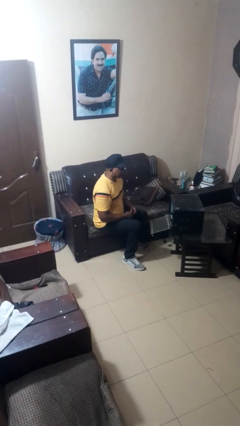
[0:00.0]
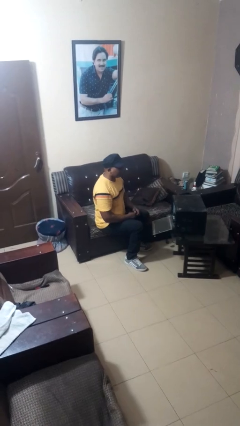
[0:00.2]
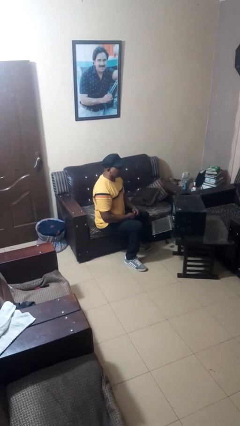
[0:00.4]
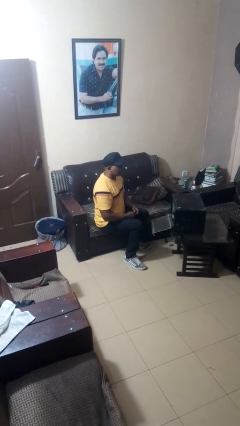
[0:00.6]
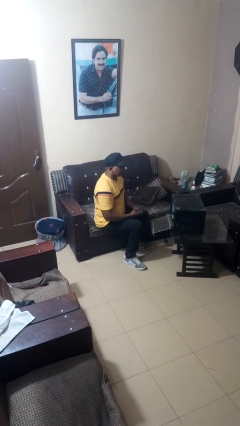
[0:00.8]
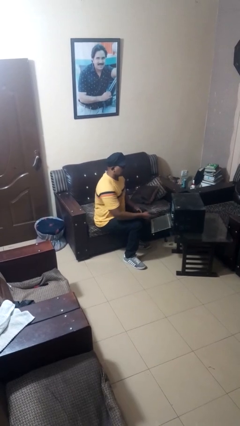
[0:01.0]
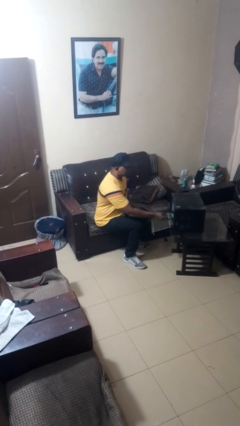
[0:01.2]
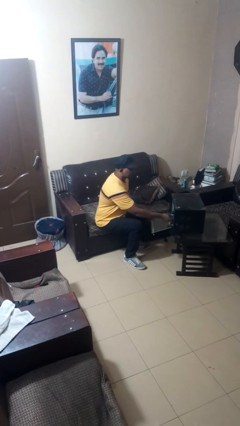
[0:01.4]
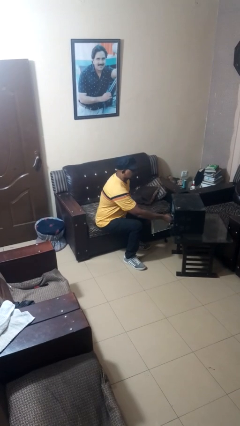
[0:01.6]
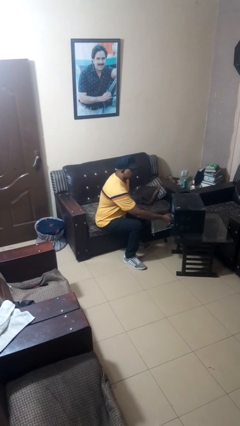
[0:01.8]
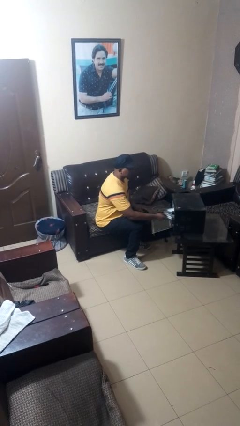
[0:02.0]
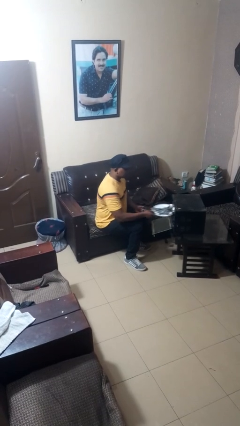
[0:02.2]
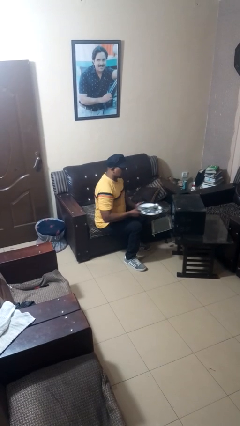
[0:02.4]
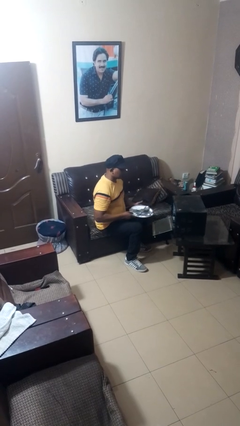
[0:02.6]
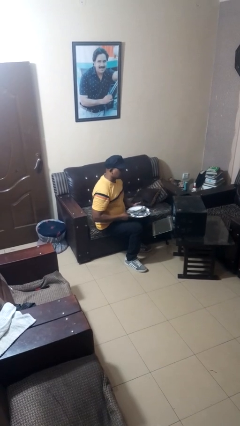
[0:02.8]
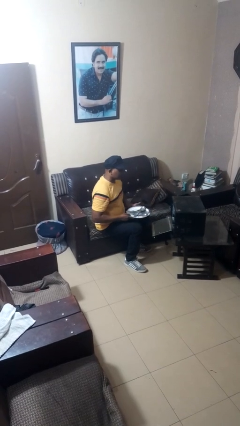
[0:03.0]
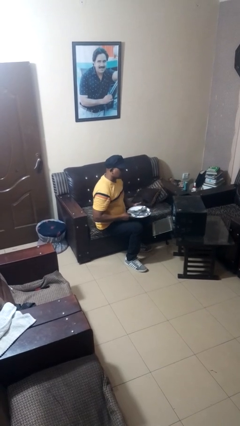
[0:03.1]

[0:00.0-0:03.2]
person unloads dishwasher

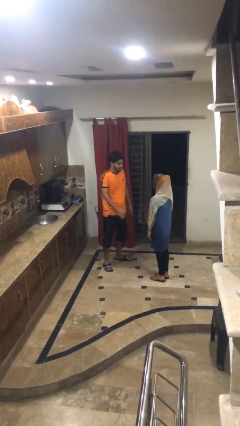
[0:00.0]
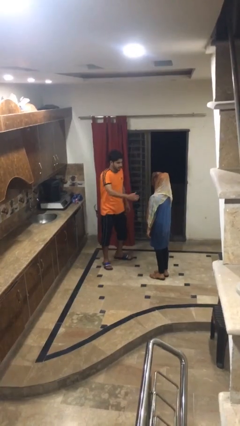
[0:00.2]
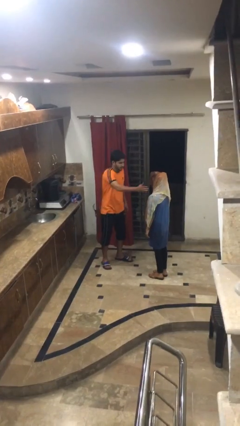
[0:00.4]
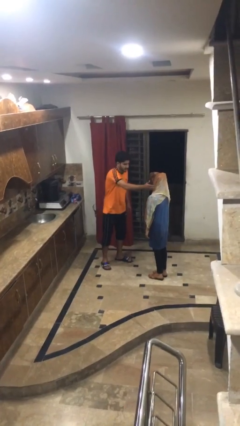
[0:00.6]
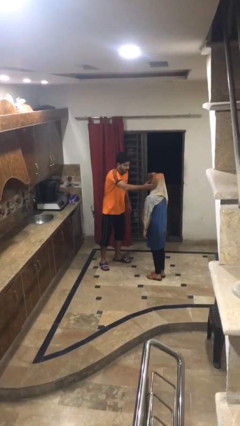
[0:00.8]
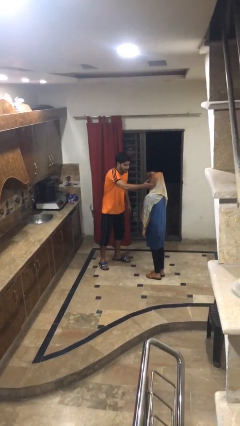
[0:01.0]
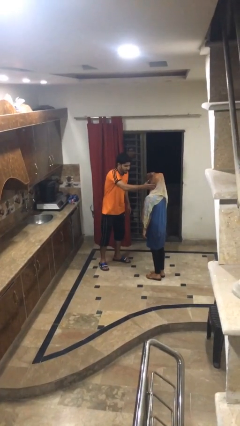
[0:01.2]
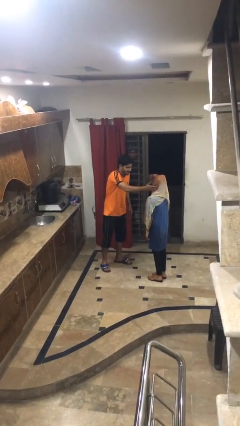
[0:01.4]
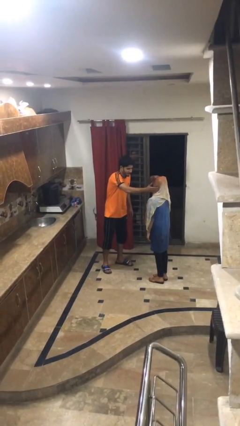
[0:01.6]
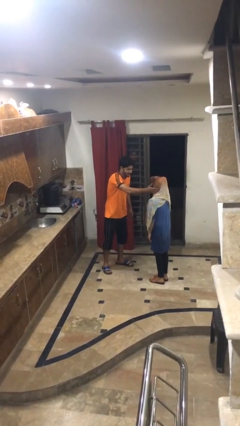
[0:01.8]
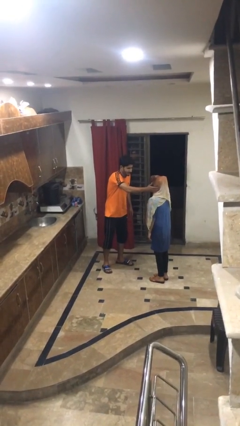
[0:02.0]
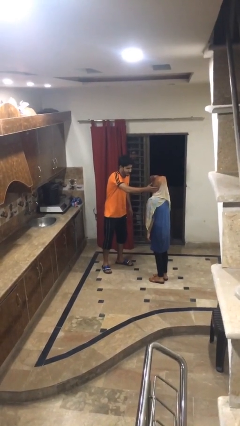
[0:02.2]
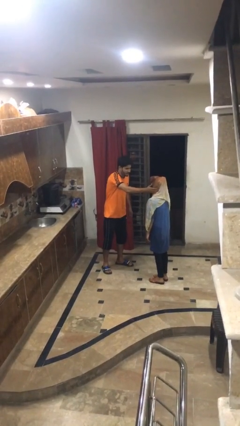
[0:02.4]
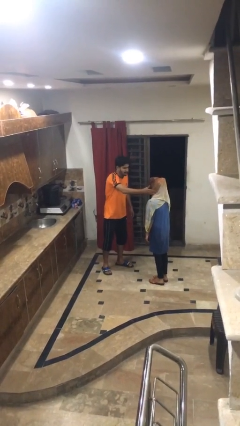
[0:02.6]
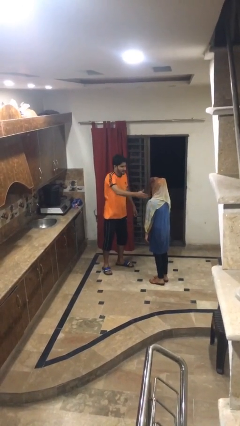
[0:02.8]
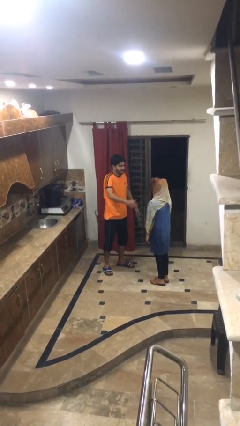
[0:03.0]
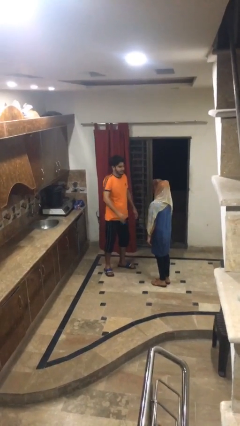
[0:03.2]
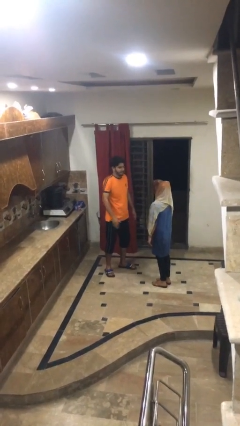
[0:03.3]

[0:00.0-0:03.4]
person touches face of person

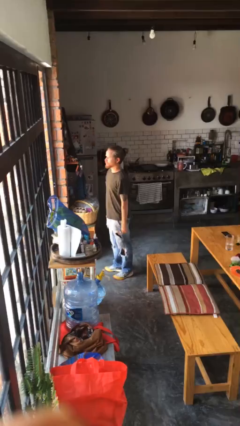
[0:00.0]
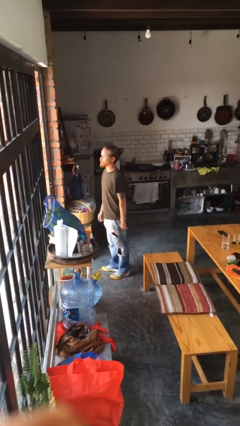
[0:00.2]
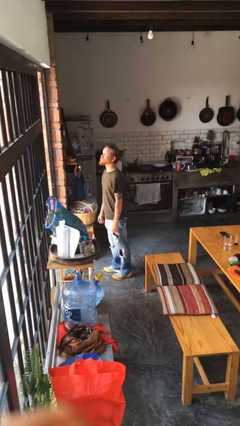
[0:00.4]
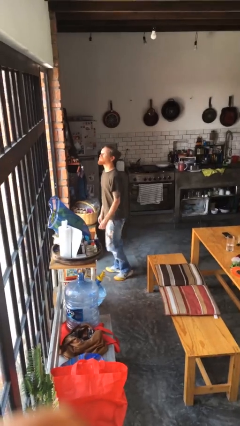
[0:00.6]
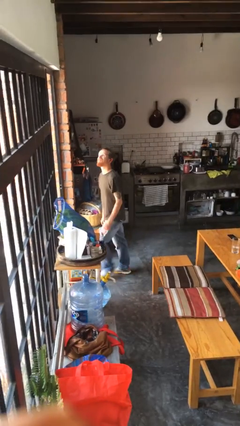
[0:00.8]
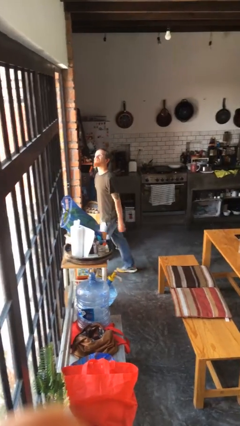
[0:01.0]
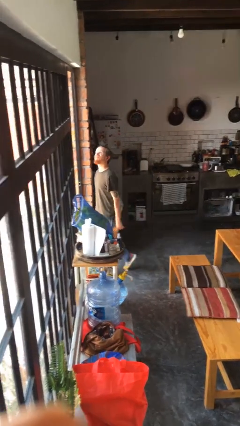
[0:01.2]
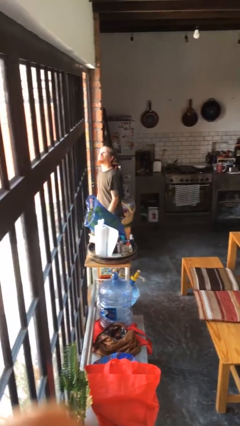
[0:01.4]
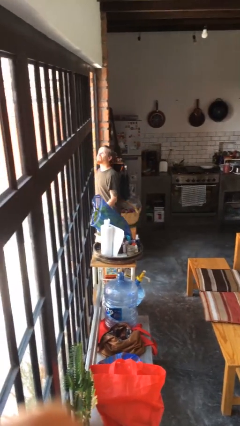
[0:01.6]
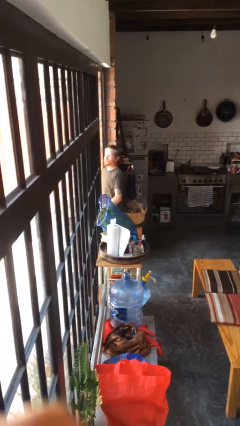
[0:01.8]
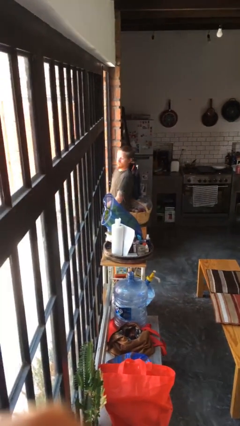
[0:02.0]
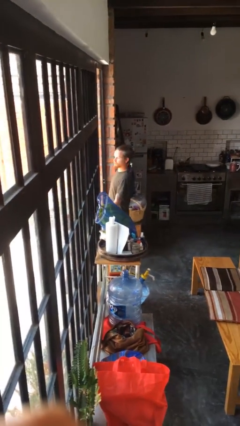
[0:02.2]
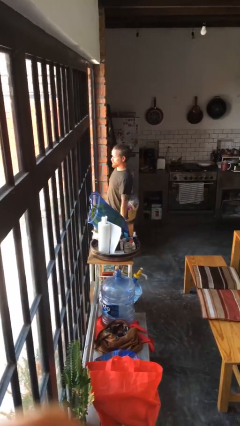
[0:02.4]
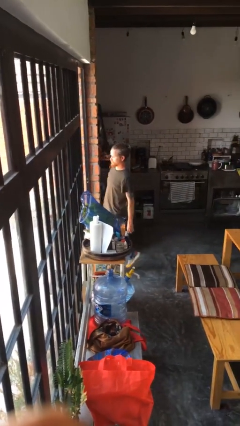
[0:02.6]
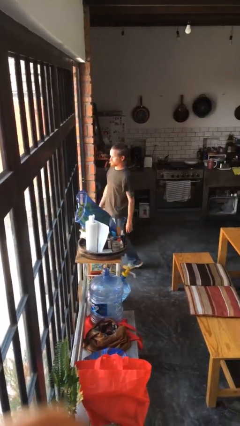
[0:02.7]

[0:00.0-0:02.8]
person bumps into wall

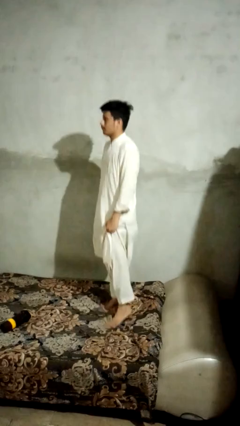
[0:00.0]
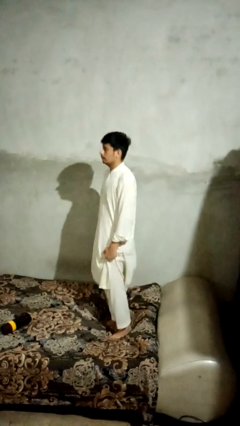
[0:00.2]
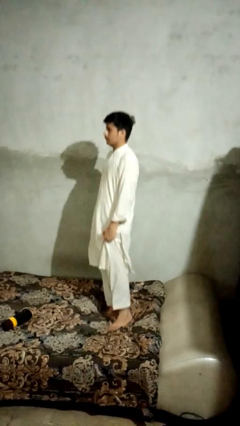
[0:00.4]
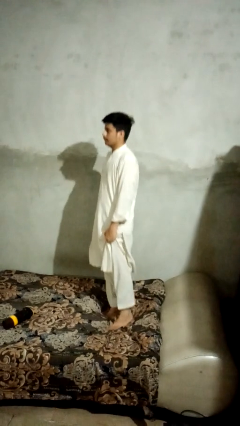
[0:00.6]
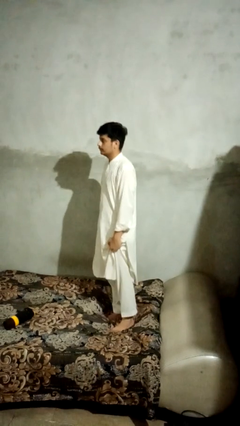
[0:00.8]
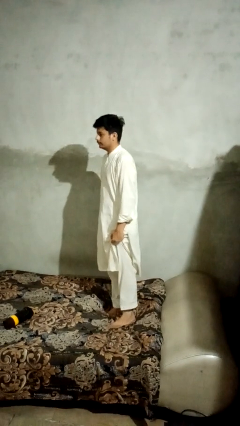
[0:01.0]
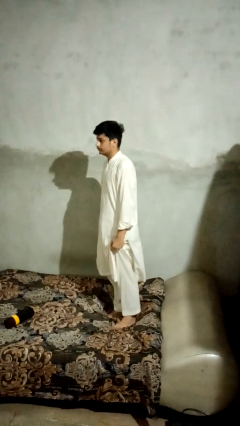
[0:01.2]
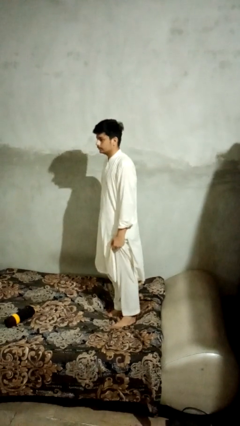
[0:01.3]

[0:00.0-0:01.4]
person jumps on bed

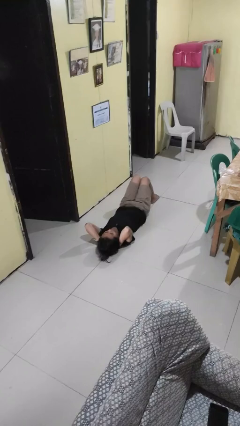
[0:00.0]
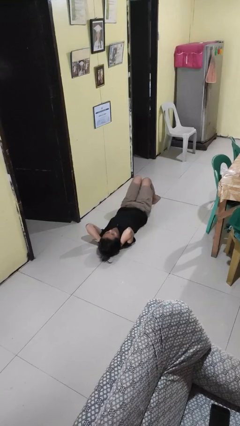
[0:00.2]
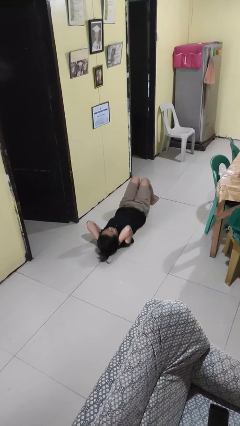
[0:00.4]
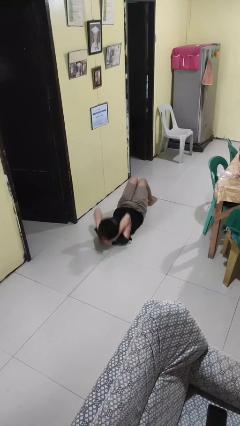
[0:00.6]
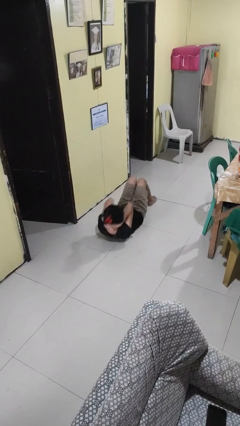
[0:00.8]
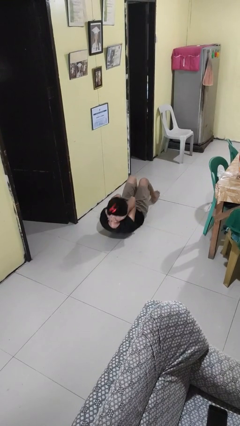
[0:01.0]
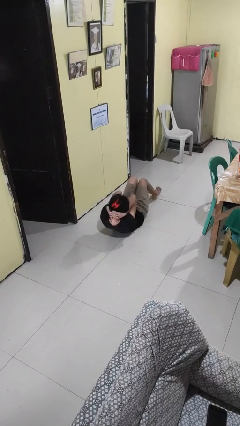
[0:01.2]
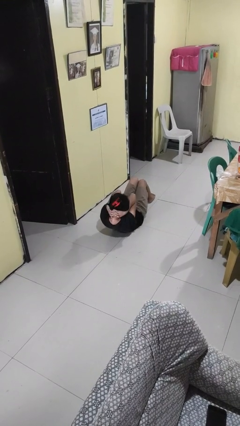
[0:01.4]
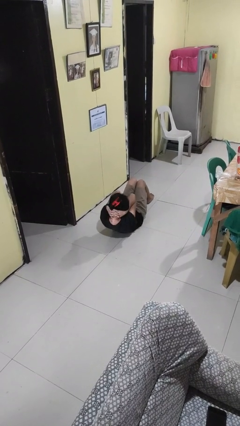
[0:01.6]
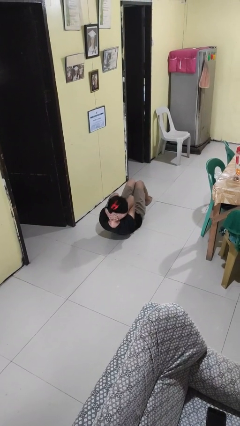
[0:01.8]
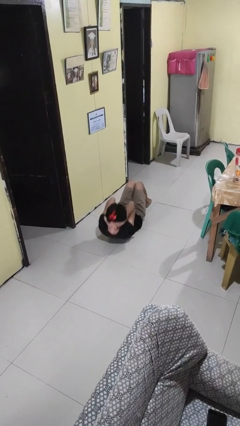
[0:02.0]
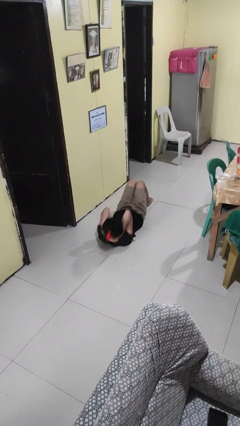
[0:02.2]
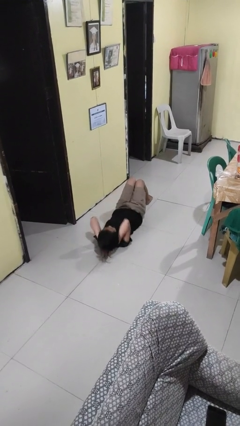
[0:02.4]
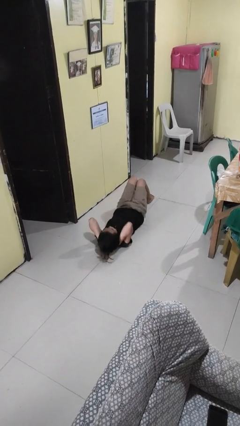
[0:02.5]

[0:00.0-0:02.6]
person exercises with situp

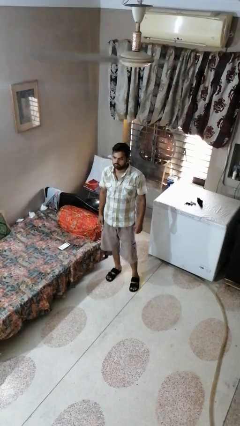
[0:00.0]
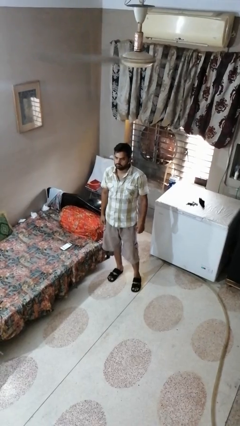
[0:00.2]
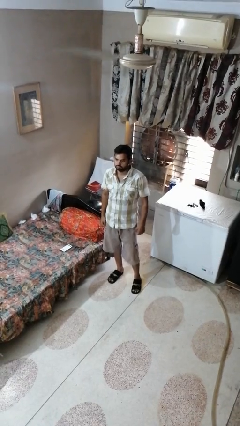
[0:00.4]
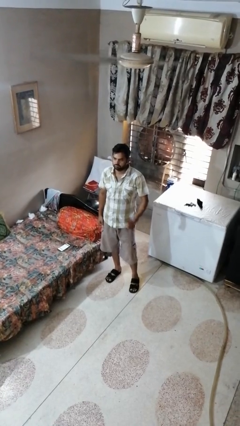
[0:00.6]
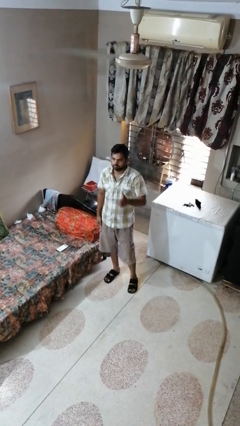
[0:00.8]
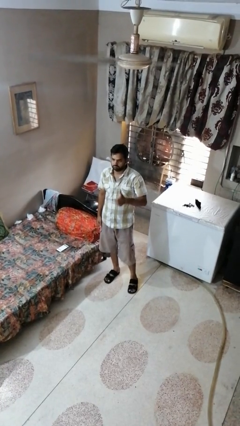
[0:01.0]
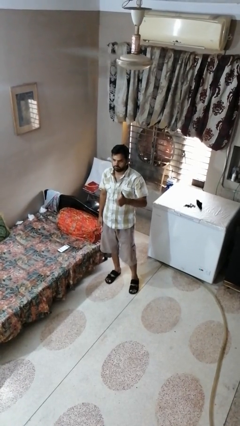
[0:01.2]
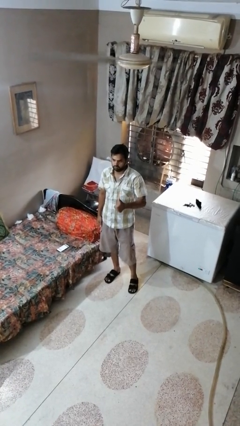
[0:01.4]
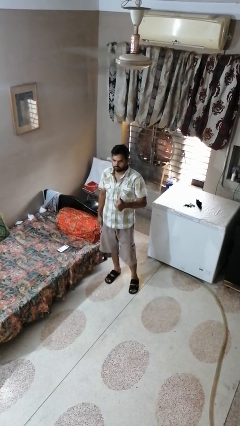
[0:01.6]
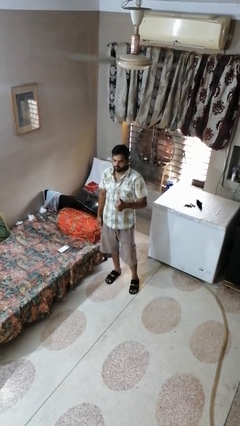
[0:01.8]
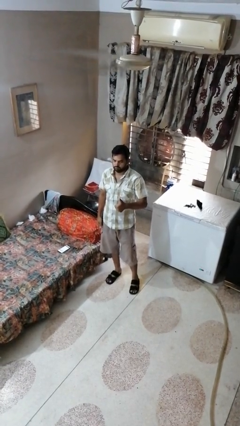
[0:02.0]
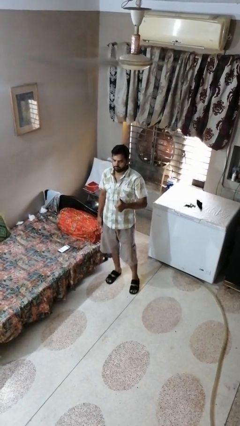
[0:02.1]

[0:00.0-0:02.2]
person gestures thumbs up

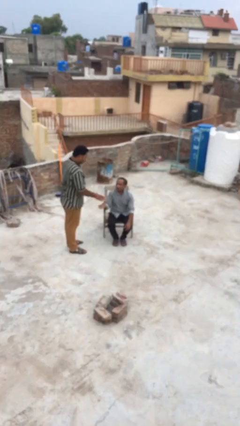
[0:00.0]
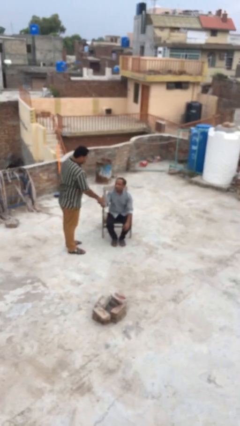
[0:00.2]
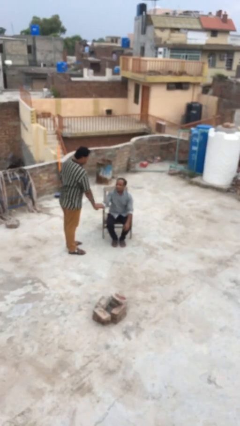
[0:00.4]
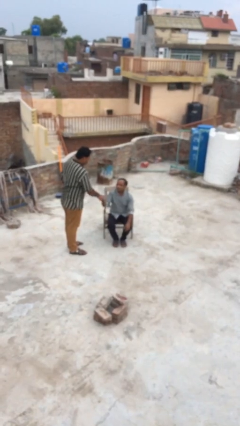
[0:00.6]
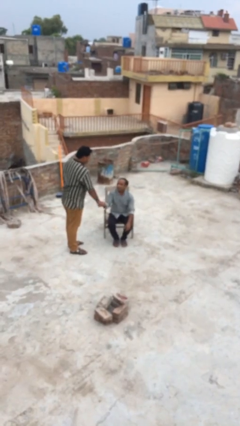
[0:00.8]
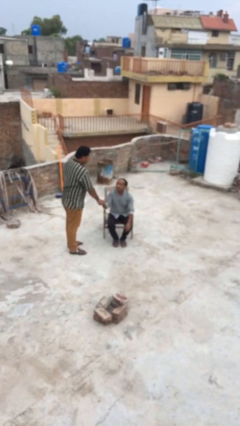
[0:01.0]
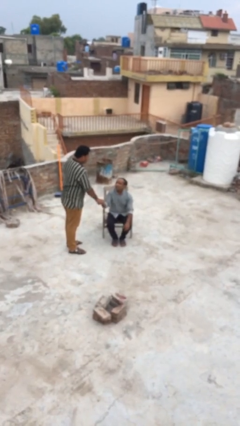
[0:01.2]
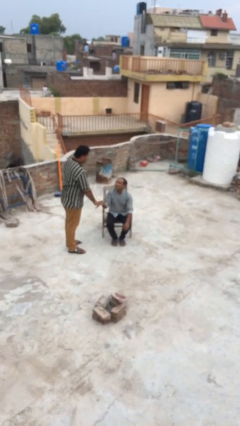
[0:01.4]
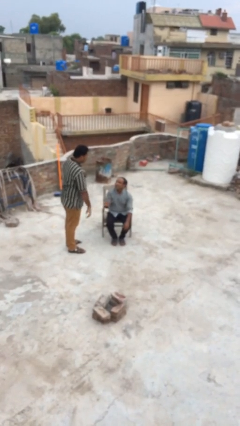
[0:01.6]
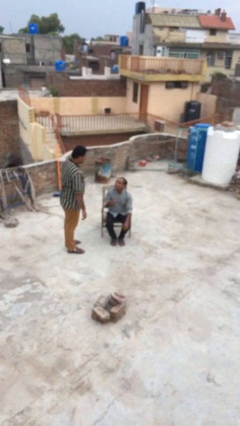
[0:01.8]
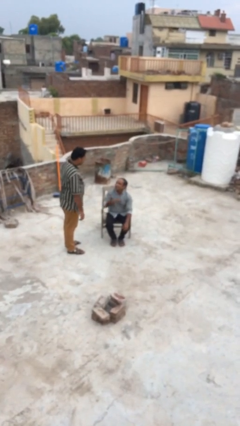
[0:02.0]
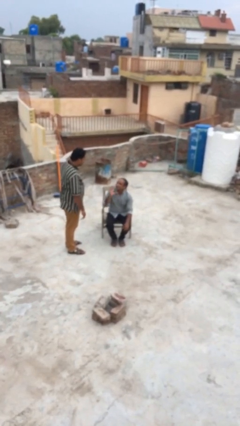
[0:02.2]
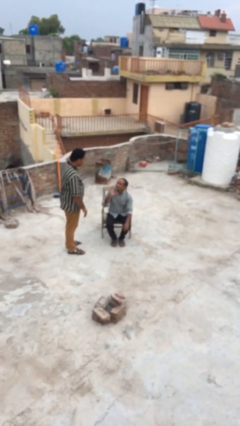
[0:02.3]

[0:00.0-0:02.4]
person shakes hand
